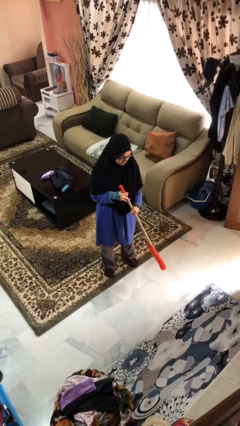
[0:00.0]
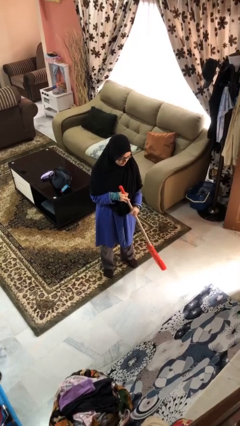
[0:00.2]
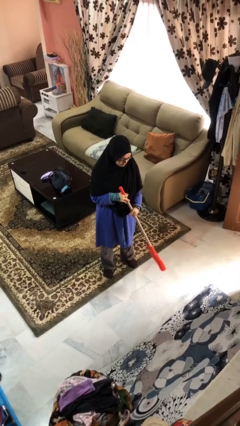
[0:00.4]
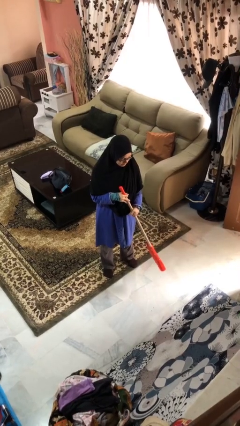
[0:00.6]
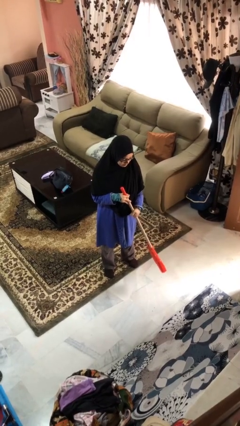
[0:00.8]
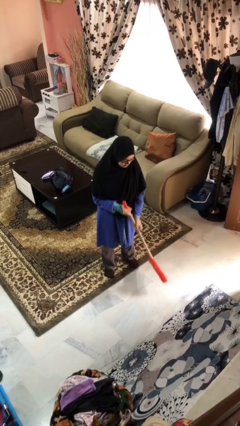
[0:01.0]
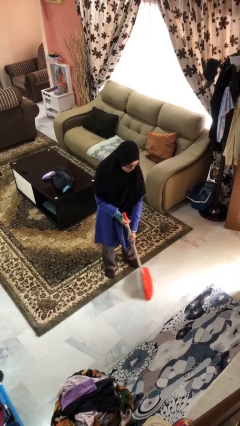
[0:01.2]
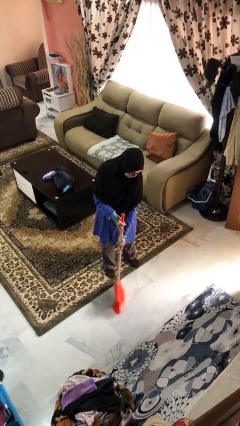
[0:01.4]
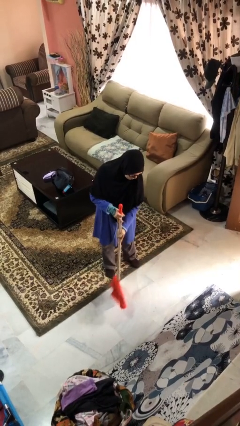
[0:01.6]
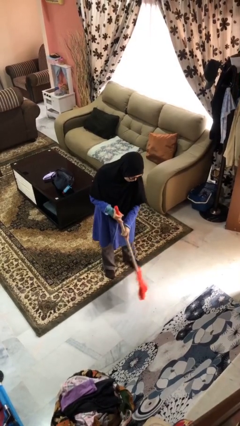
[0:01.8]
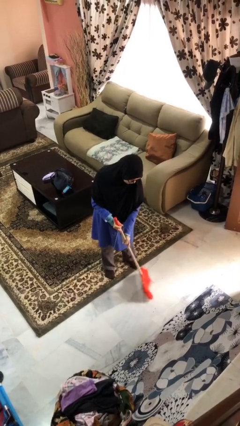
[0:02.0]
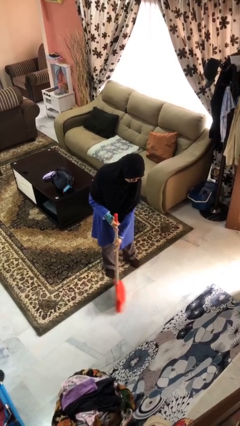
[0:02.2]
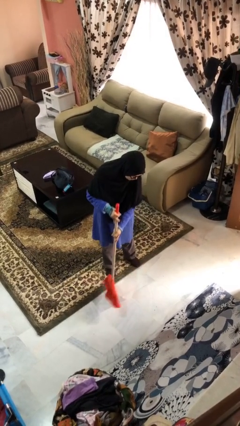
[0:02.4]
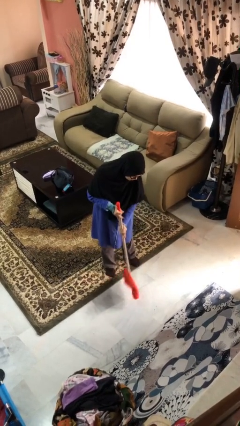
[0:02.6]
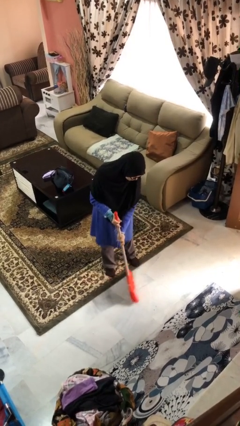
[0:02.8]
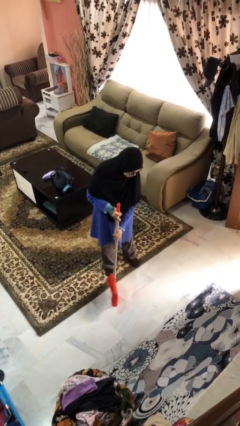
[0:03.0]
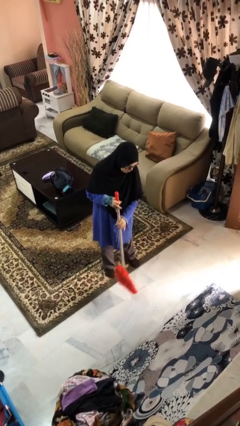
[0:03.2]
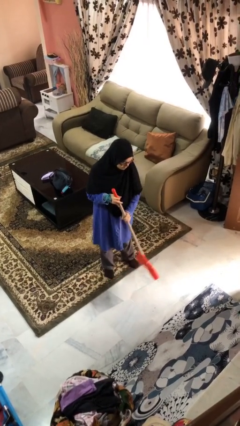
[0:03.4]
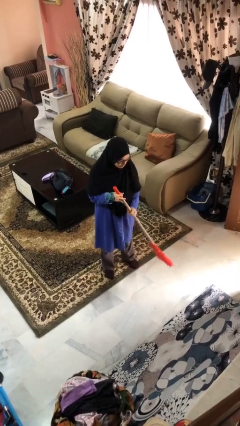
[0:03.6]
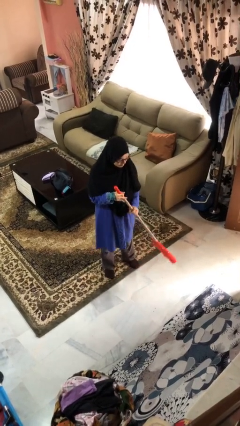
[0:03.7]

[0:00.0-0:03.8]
person sweeps floor

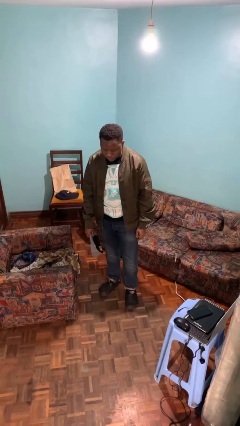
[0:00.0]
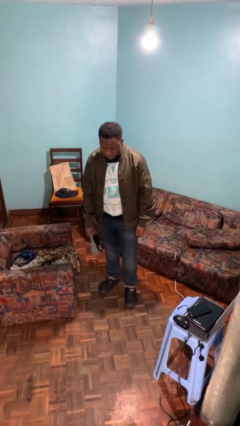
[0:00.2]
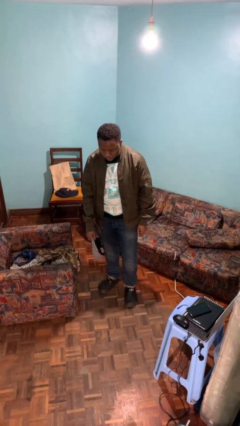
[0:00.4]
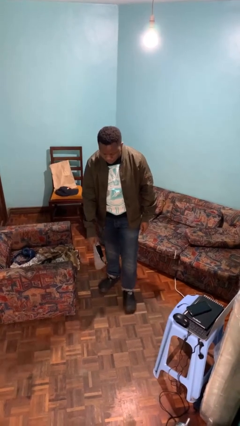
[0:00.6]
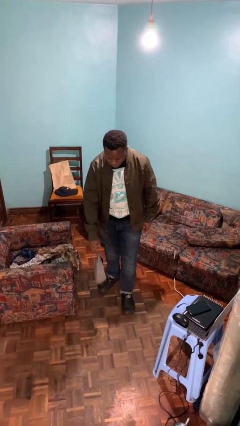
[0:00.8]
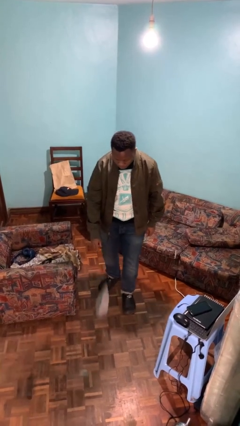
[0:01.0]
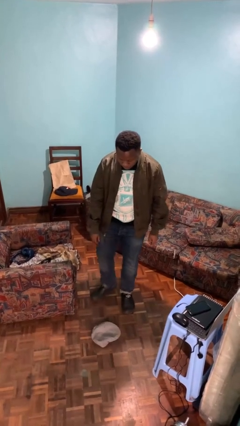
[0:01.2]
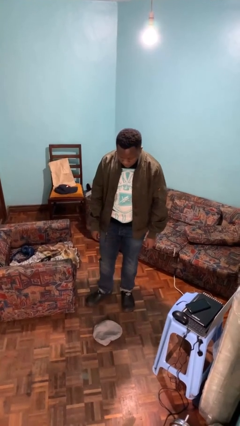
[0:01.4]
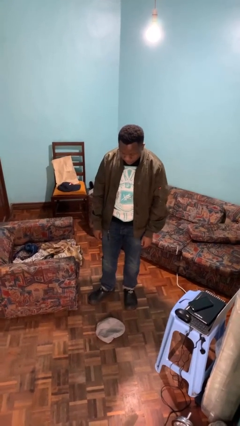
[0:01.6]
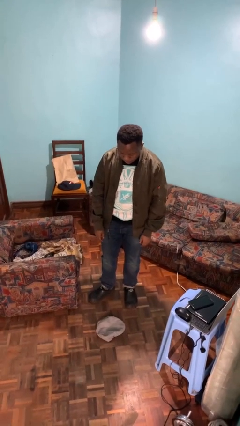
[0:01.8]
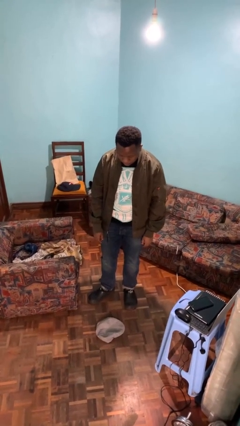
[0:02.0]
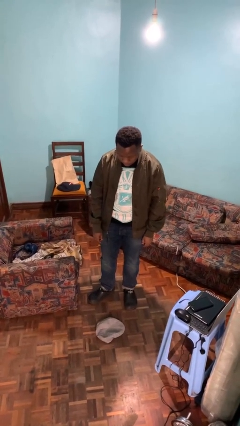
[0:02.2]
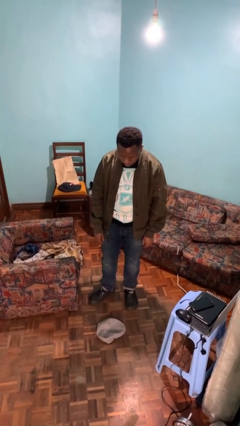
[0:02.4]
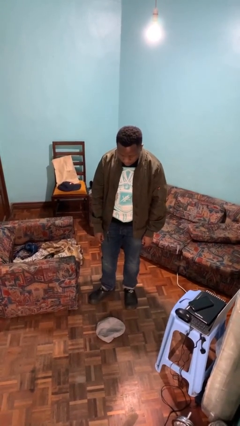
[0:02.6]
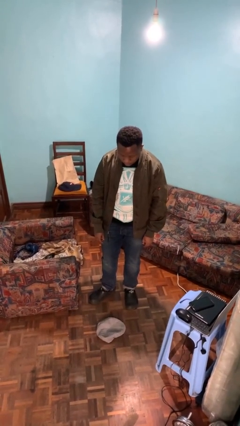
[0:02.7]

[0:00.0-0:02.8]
person drops object

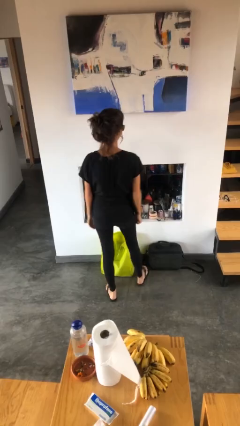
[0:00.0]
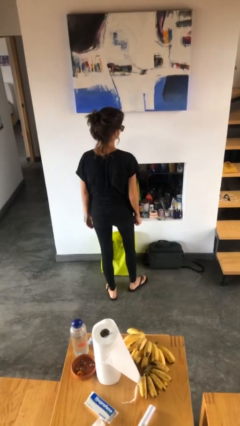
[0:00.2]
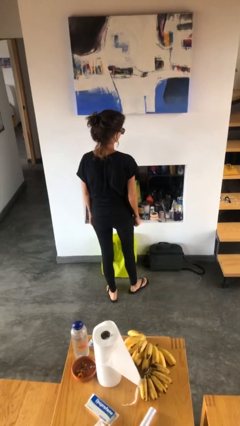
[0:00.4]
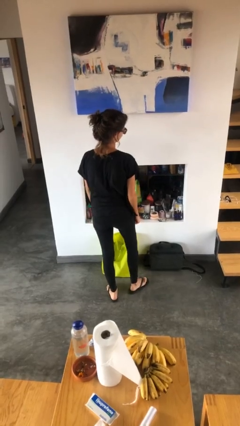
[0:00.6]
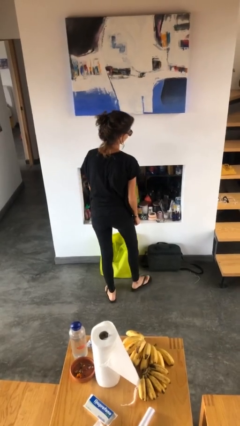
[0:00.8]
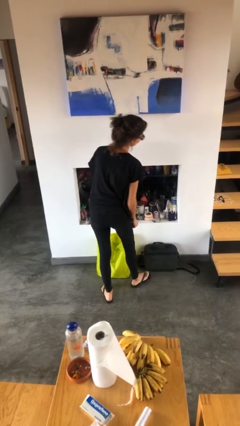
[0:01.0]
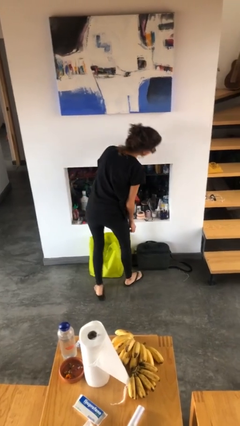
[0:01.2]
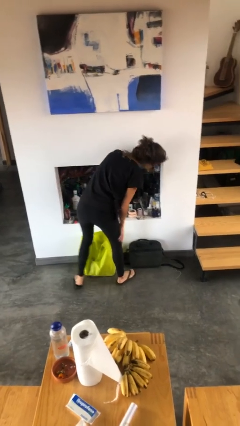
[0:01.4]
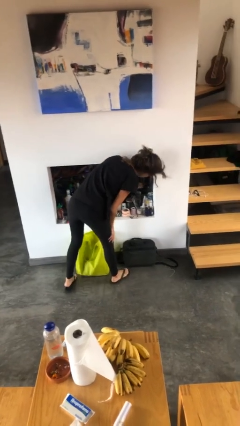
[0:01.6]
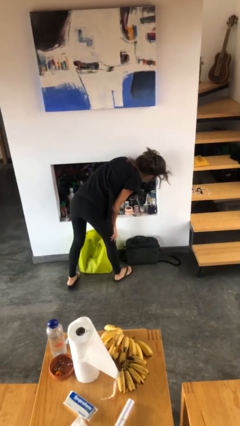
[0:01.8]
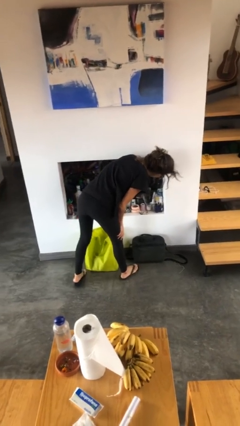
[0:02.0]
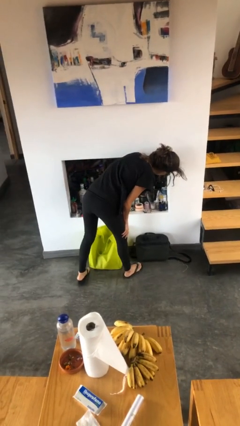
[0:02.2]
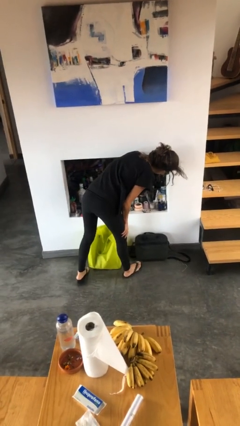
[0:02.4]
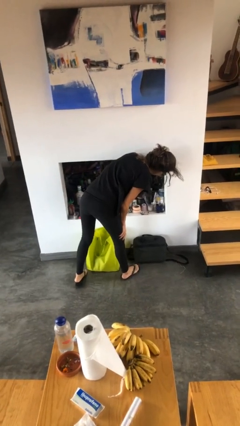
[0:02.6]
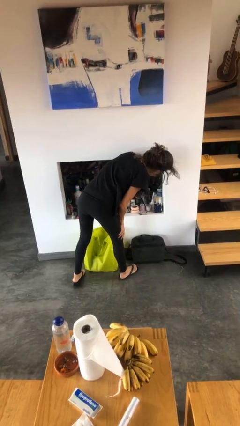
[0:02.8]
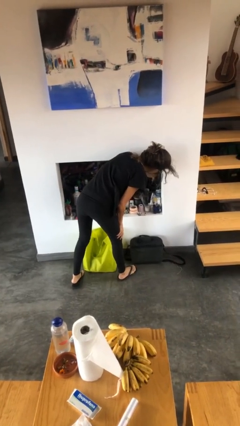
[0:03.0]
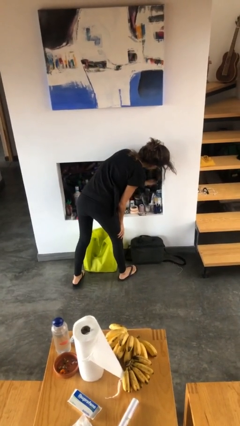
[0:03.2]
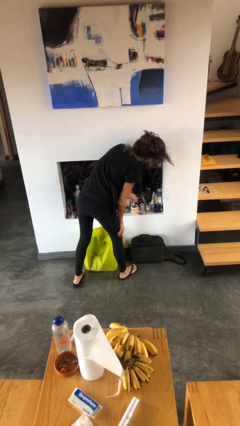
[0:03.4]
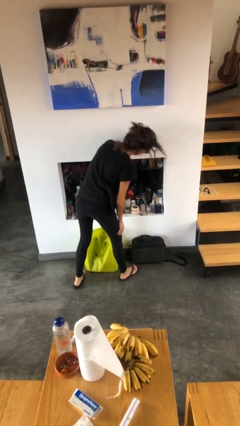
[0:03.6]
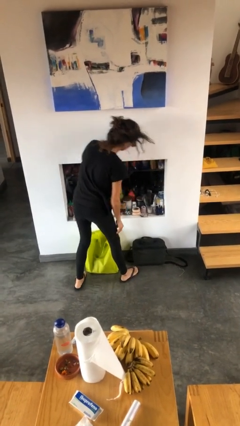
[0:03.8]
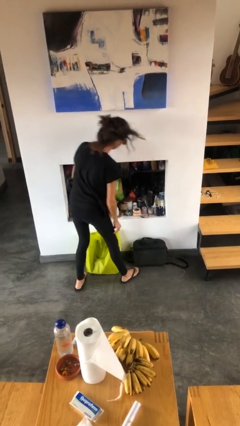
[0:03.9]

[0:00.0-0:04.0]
person searches in cabinet

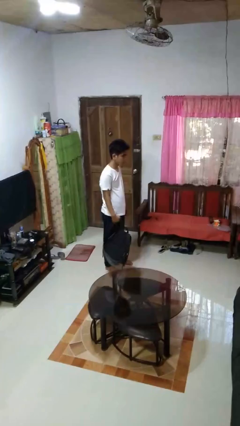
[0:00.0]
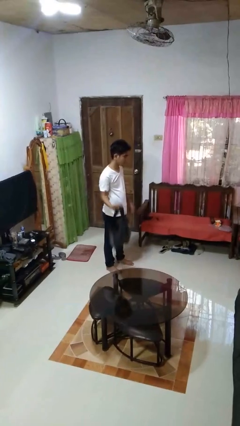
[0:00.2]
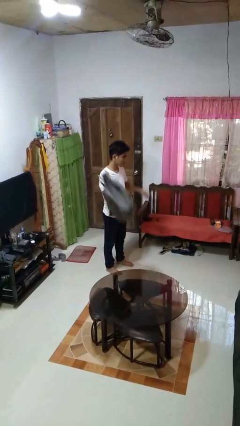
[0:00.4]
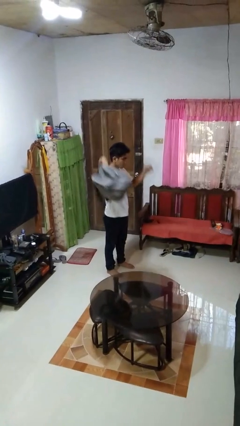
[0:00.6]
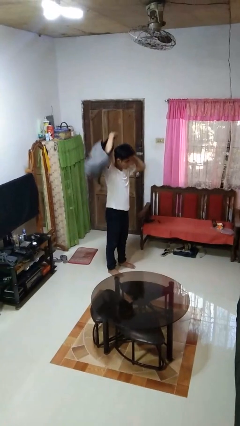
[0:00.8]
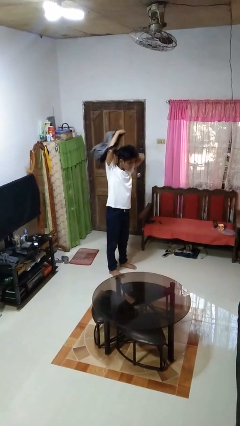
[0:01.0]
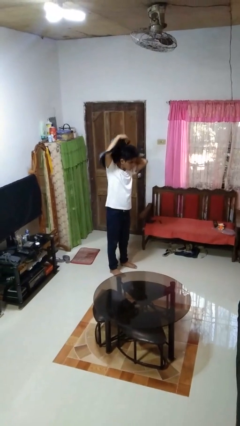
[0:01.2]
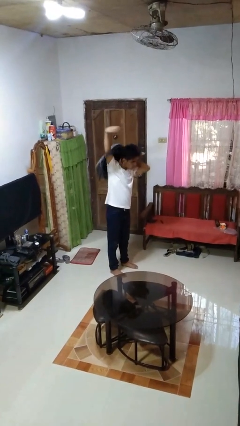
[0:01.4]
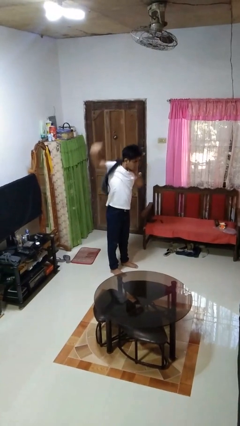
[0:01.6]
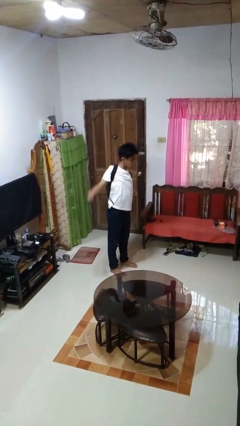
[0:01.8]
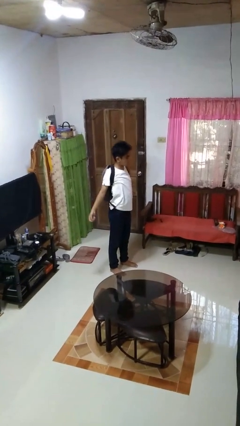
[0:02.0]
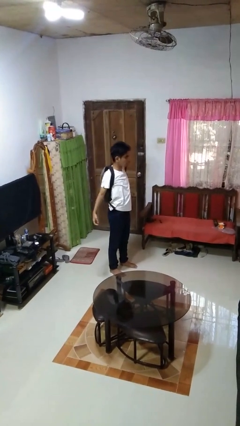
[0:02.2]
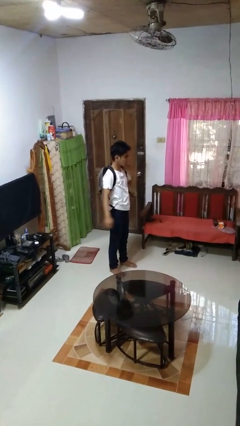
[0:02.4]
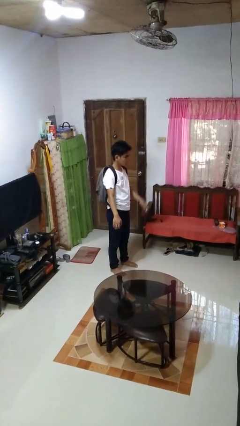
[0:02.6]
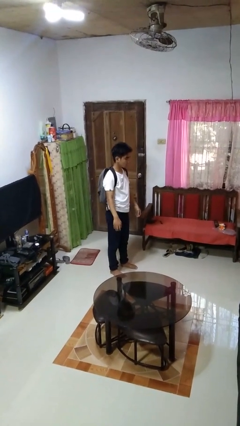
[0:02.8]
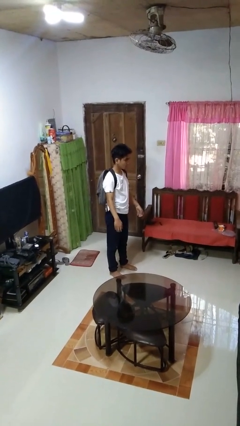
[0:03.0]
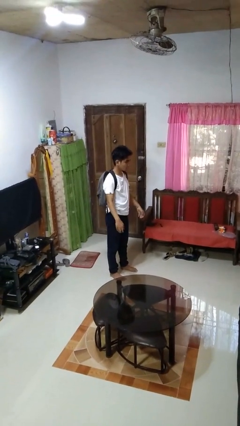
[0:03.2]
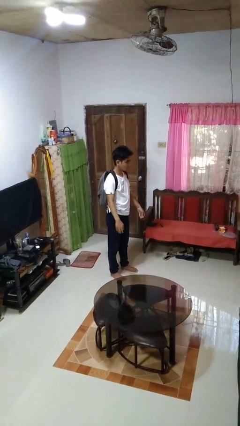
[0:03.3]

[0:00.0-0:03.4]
person puts on backpack

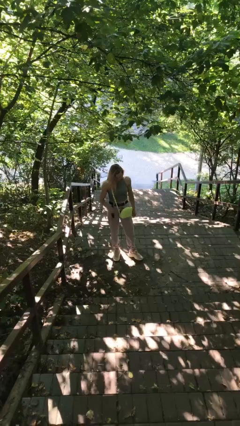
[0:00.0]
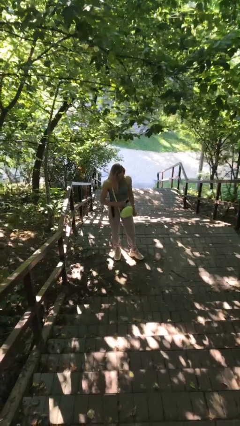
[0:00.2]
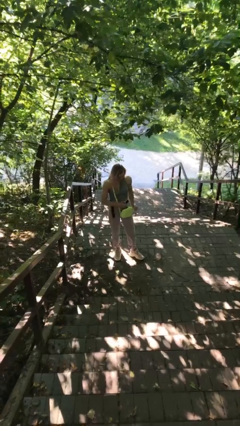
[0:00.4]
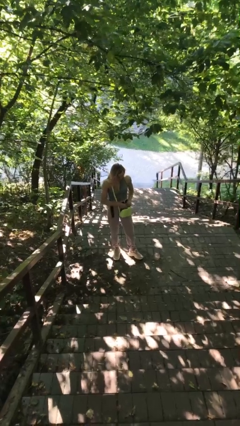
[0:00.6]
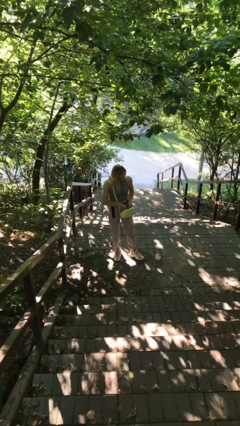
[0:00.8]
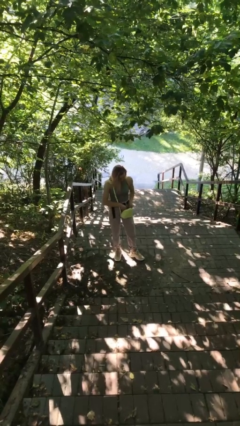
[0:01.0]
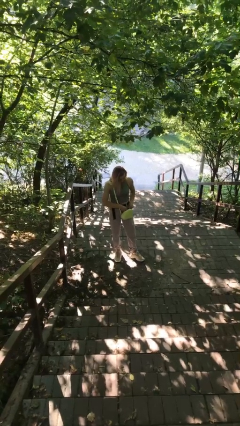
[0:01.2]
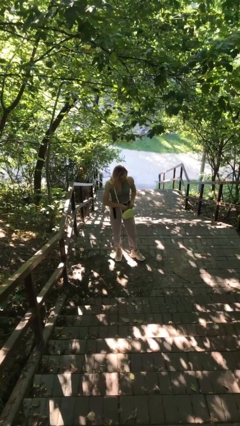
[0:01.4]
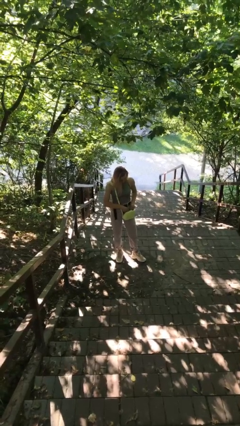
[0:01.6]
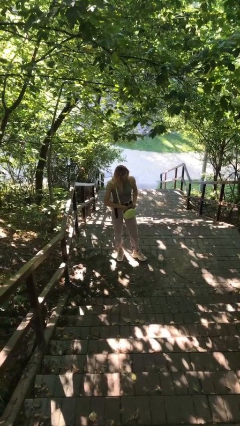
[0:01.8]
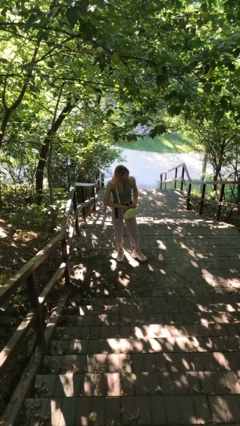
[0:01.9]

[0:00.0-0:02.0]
person searches in purse

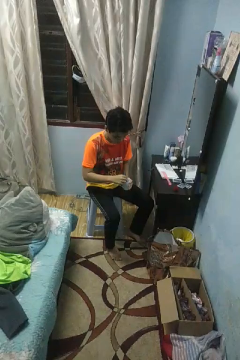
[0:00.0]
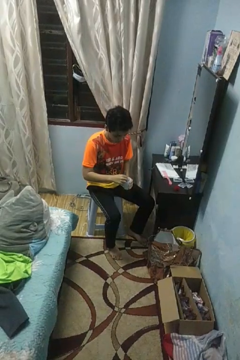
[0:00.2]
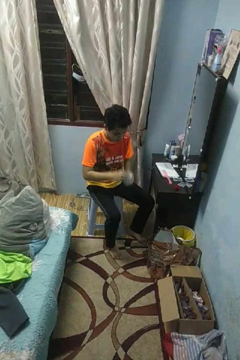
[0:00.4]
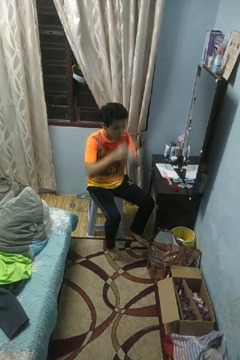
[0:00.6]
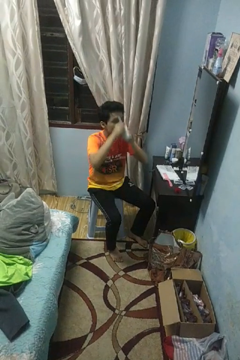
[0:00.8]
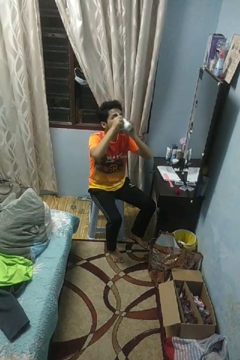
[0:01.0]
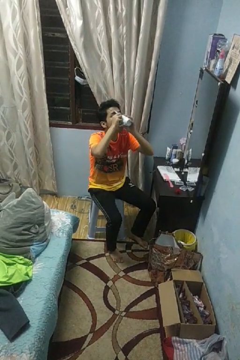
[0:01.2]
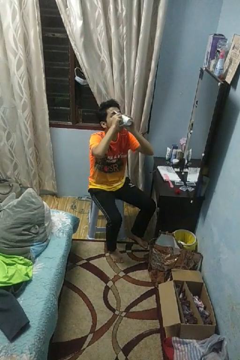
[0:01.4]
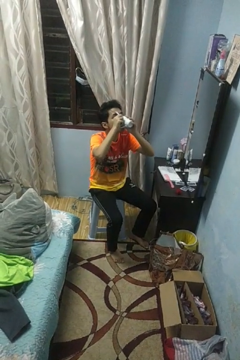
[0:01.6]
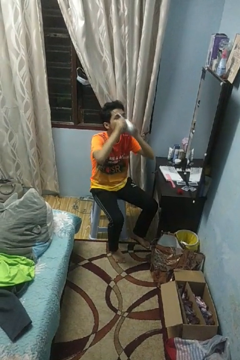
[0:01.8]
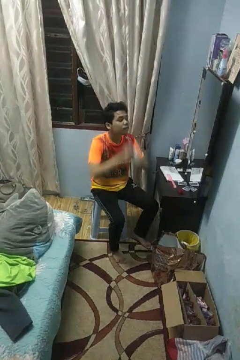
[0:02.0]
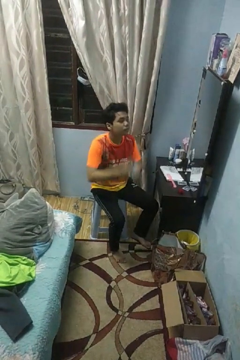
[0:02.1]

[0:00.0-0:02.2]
person drinks from mug
